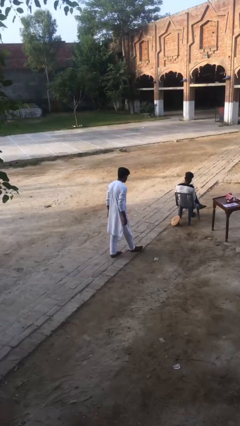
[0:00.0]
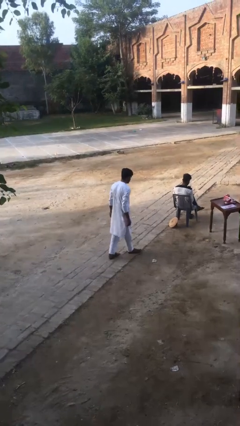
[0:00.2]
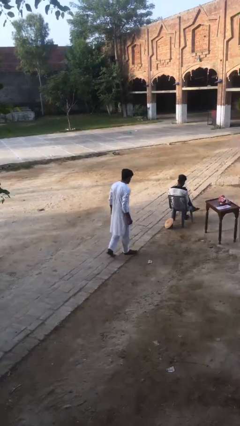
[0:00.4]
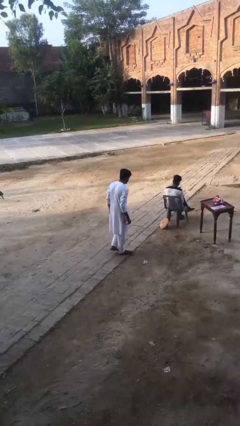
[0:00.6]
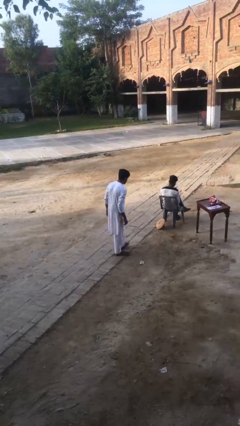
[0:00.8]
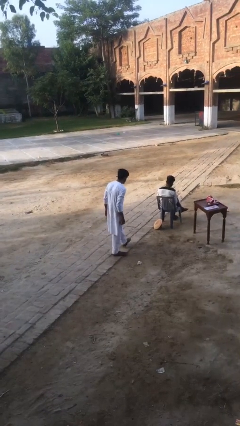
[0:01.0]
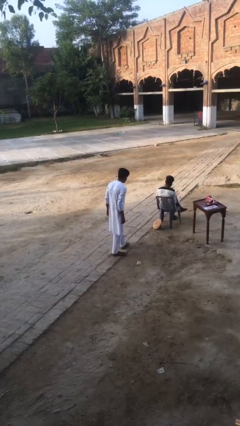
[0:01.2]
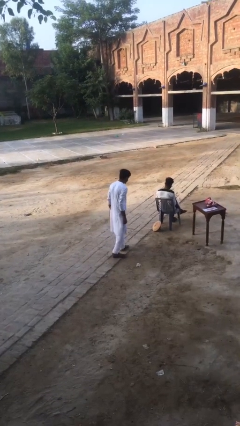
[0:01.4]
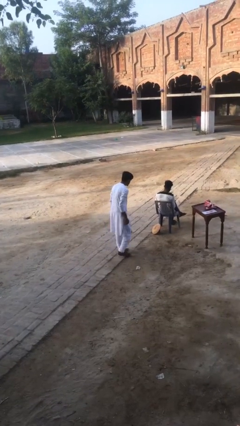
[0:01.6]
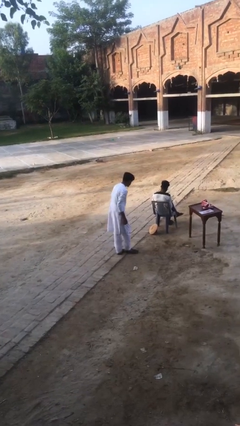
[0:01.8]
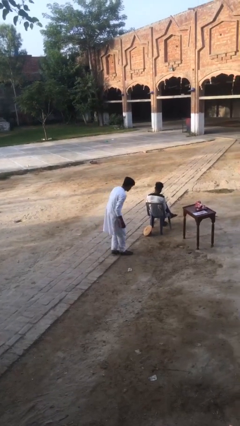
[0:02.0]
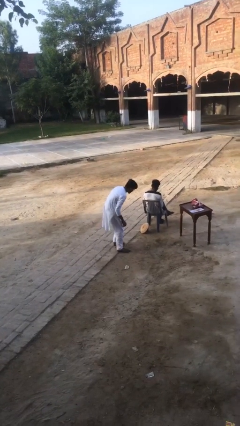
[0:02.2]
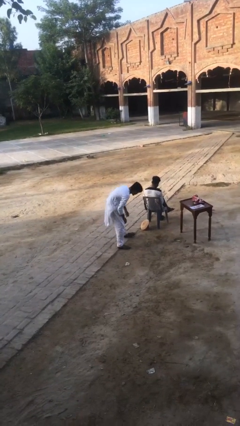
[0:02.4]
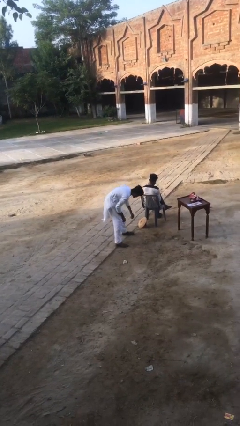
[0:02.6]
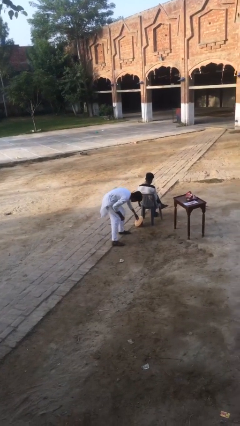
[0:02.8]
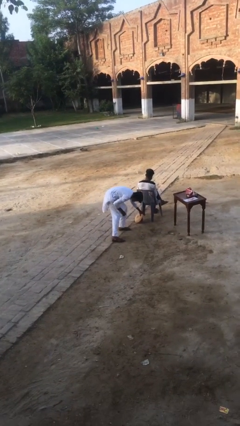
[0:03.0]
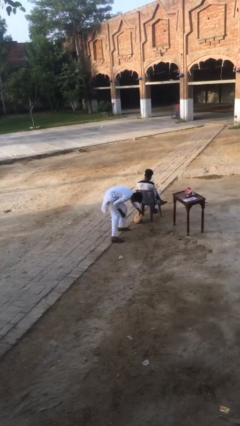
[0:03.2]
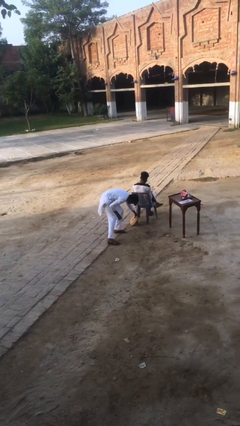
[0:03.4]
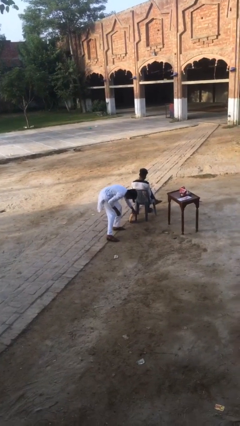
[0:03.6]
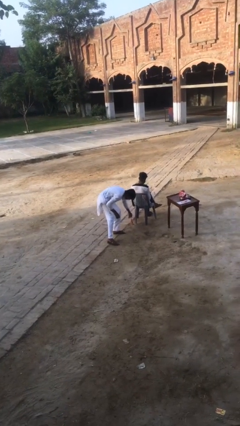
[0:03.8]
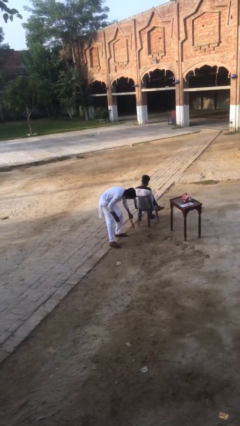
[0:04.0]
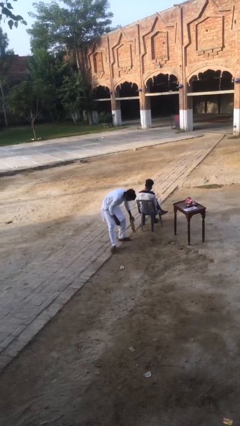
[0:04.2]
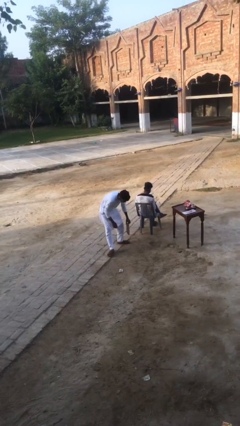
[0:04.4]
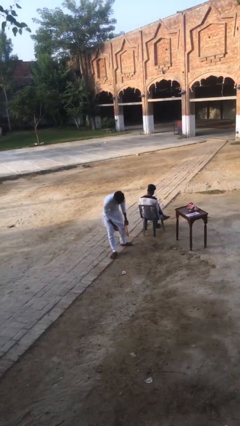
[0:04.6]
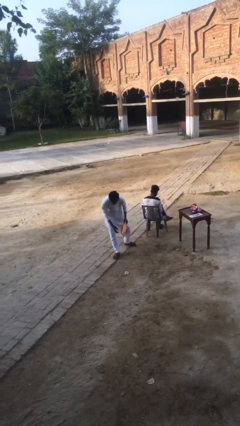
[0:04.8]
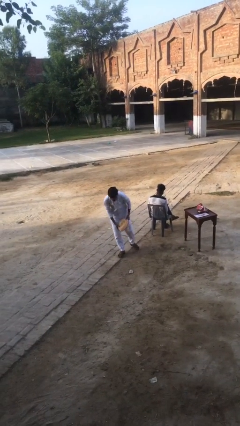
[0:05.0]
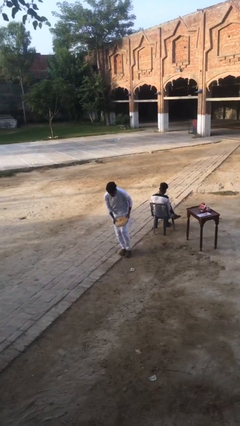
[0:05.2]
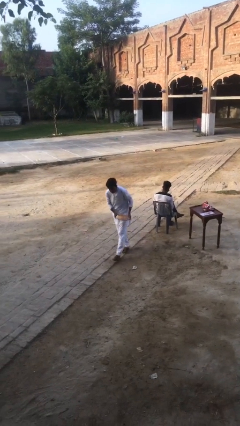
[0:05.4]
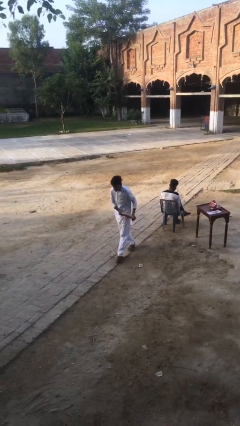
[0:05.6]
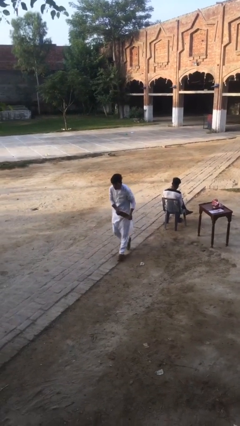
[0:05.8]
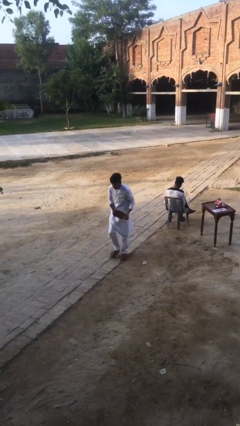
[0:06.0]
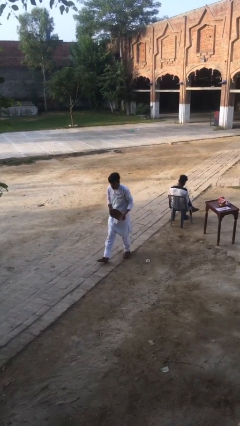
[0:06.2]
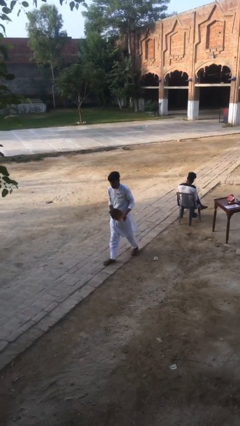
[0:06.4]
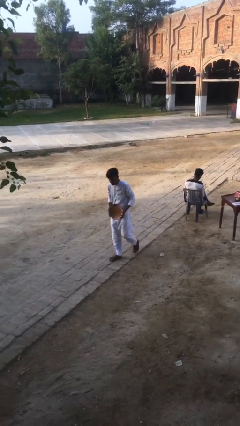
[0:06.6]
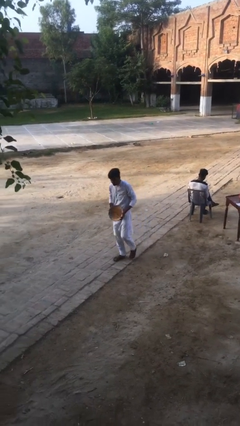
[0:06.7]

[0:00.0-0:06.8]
person steals object from person

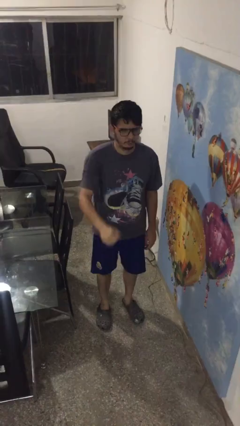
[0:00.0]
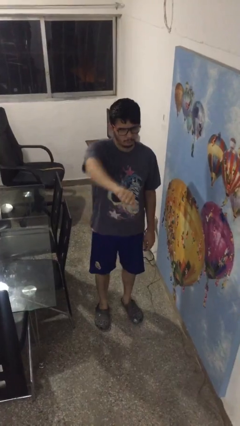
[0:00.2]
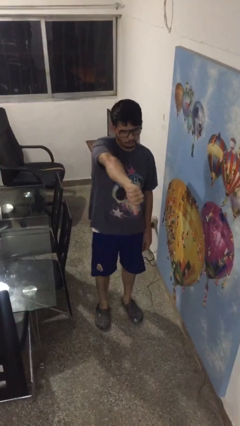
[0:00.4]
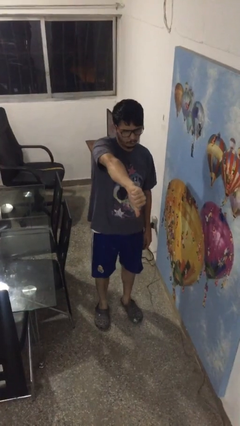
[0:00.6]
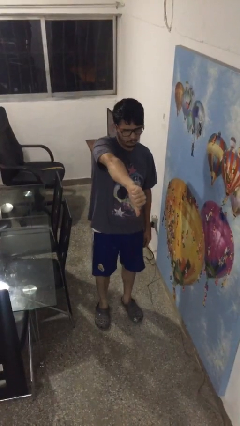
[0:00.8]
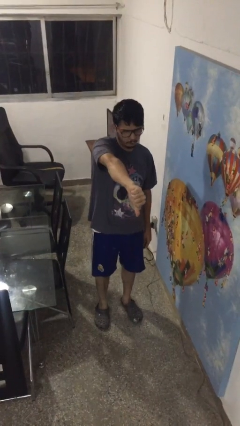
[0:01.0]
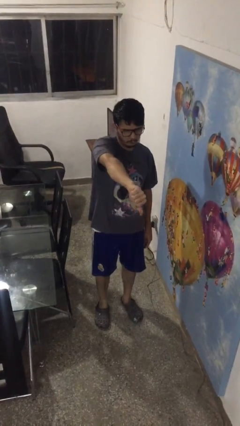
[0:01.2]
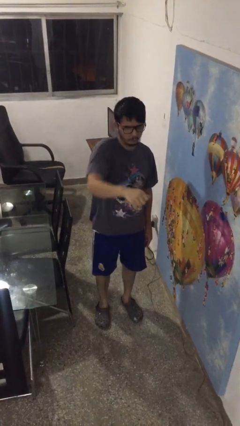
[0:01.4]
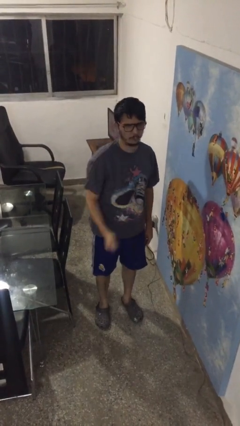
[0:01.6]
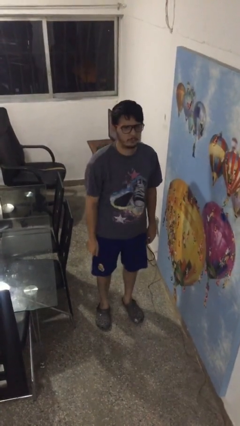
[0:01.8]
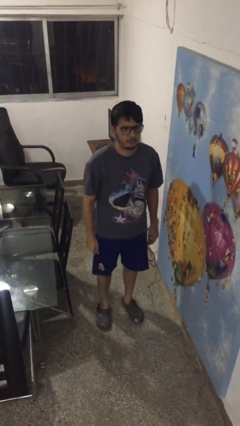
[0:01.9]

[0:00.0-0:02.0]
person gestures thumbs down

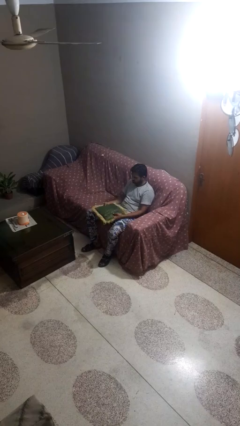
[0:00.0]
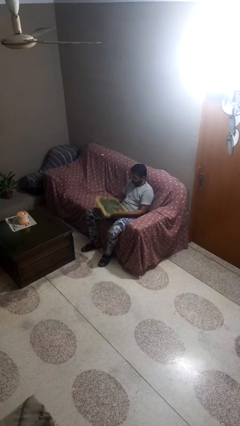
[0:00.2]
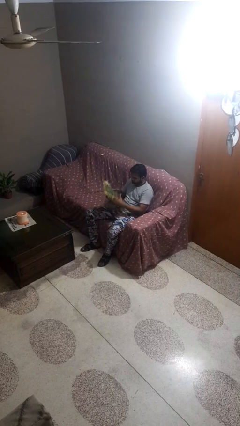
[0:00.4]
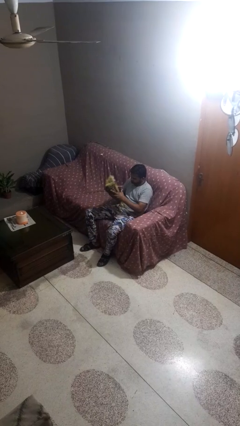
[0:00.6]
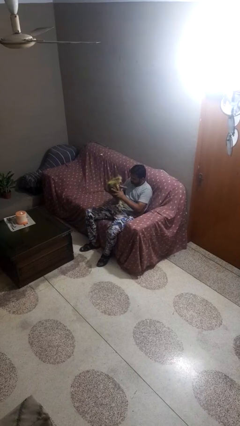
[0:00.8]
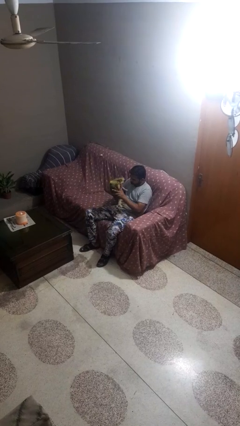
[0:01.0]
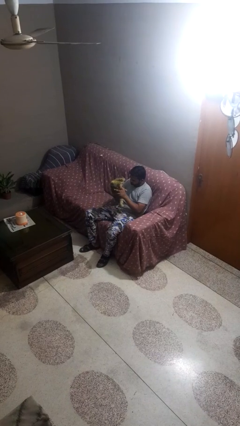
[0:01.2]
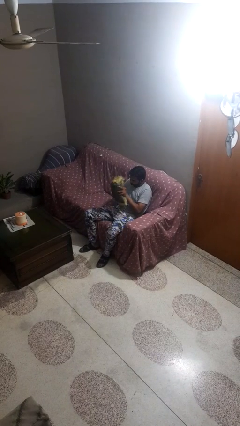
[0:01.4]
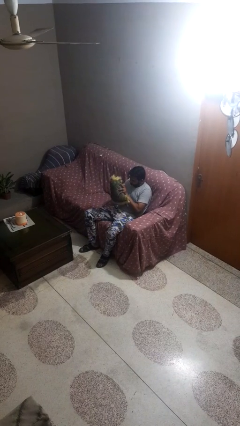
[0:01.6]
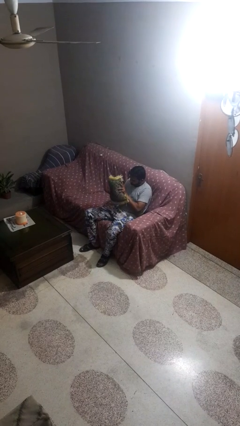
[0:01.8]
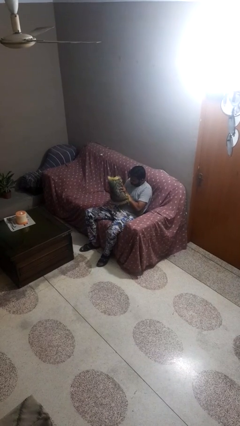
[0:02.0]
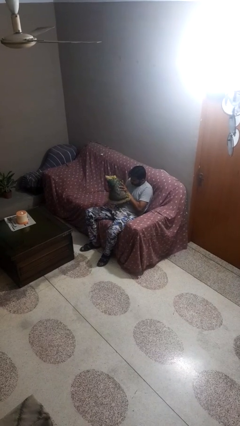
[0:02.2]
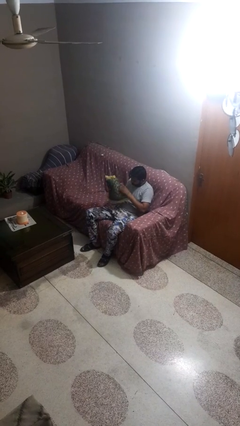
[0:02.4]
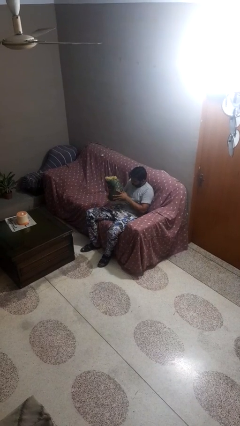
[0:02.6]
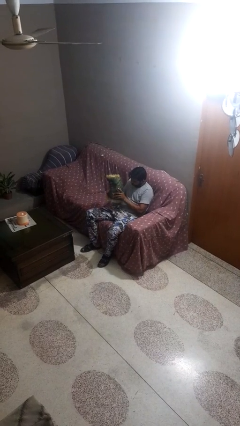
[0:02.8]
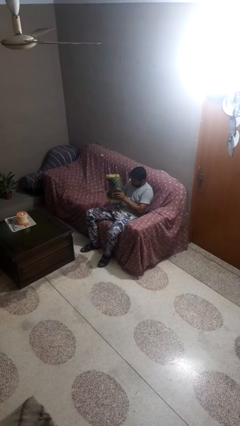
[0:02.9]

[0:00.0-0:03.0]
person squeezes object

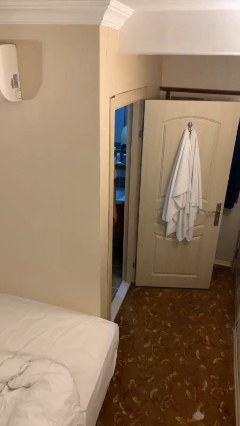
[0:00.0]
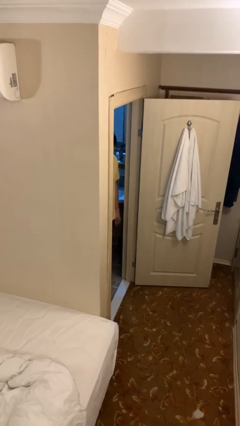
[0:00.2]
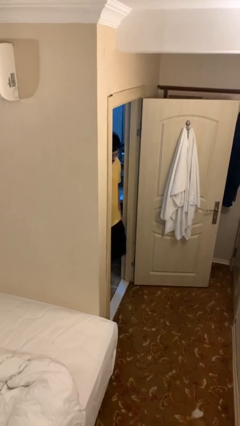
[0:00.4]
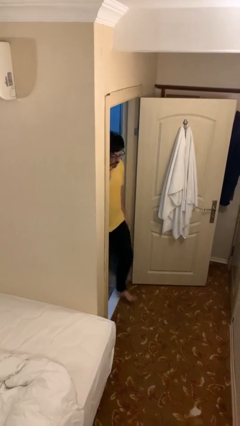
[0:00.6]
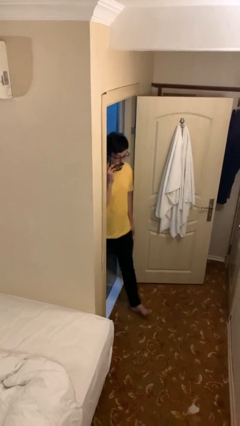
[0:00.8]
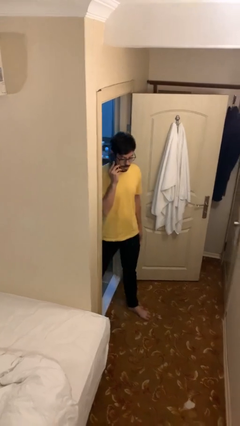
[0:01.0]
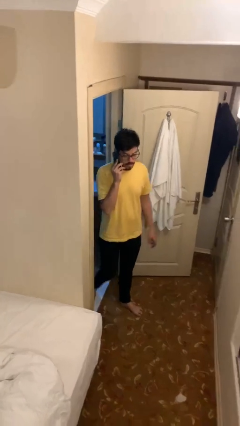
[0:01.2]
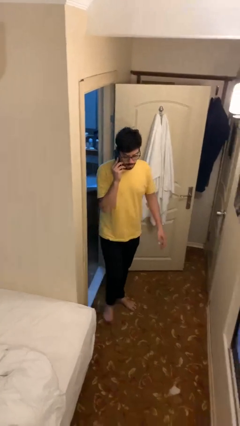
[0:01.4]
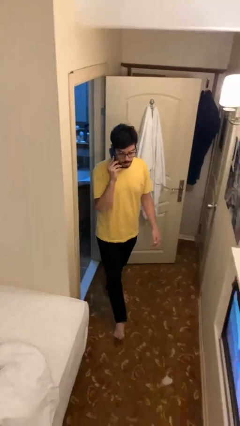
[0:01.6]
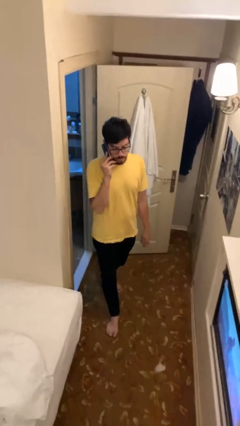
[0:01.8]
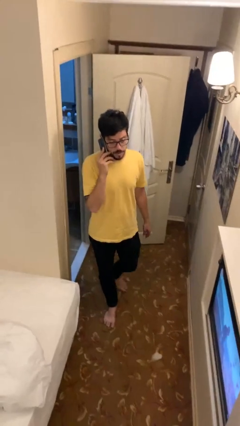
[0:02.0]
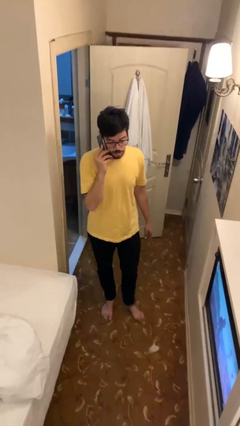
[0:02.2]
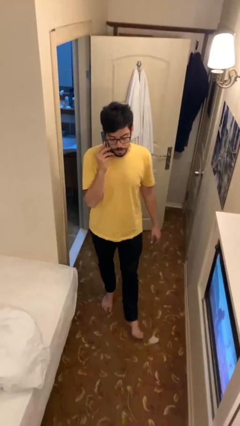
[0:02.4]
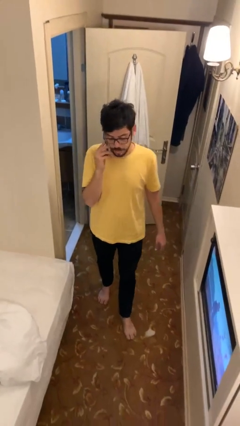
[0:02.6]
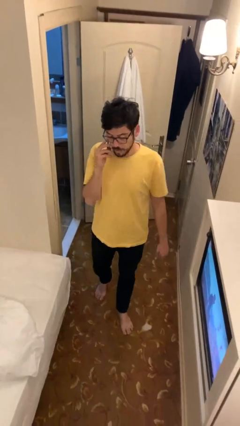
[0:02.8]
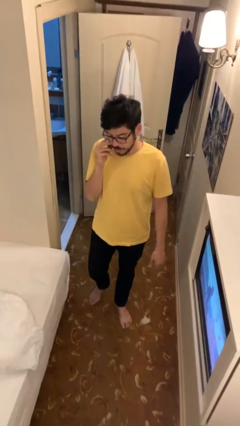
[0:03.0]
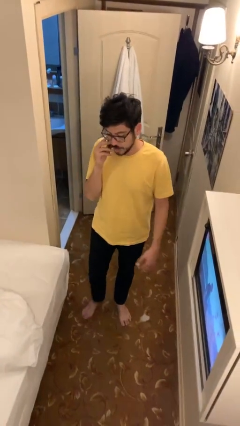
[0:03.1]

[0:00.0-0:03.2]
person enters scene through structure

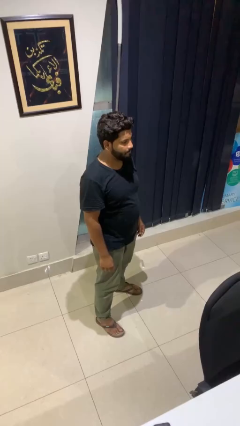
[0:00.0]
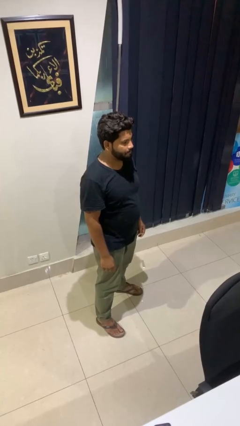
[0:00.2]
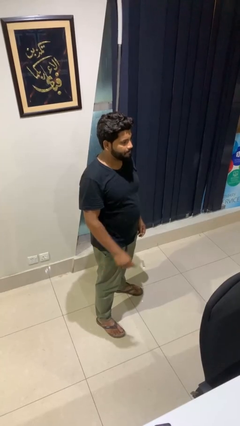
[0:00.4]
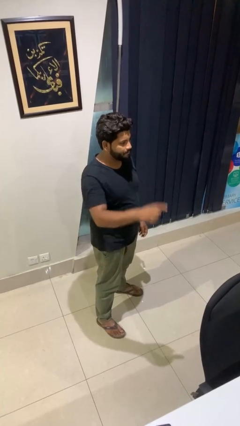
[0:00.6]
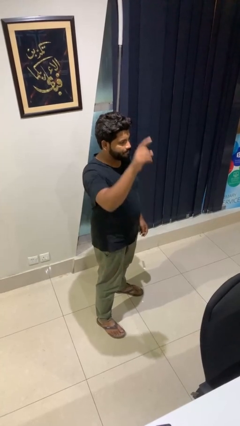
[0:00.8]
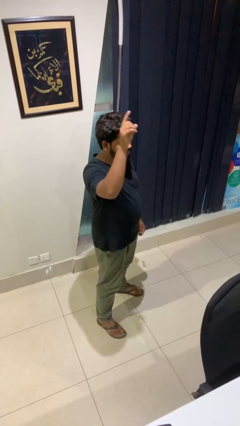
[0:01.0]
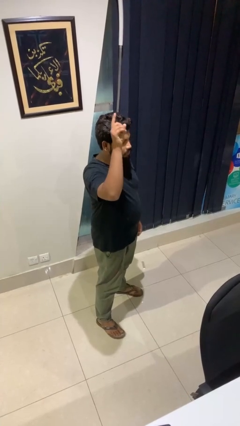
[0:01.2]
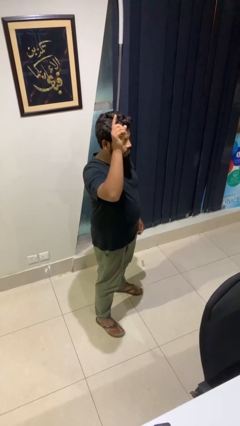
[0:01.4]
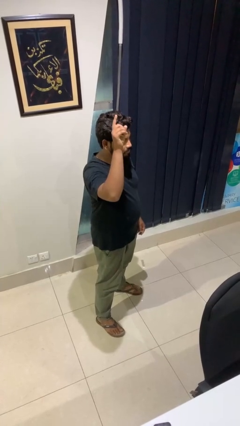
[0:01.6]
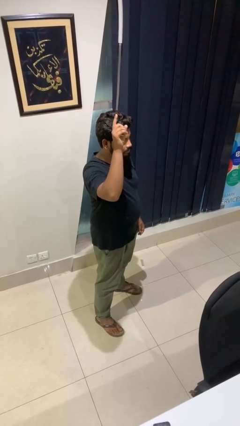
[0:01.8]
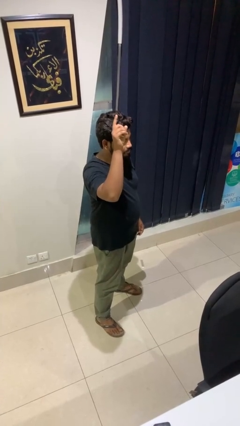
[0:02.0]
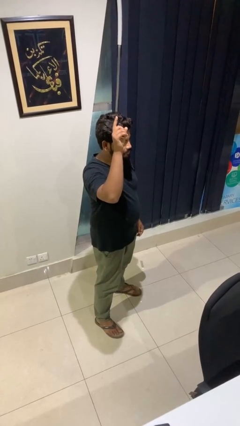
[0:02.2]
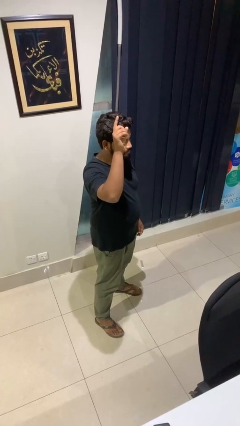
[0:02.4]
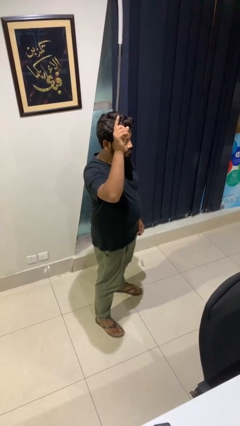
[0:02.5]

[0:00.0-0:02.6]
person gestures raise hand

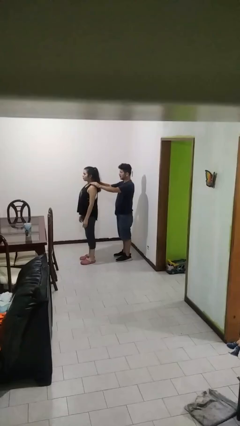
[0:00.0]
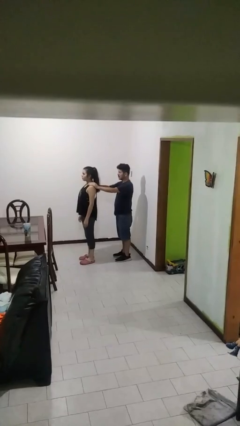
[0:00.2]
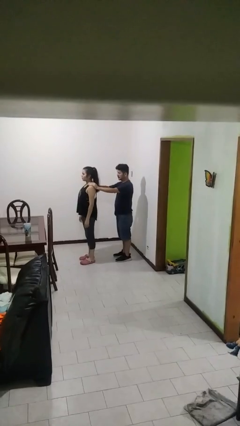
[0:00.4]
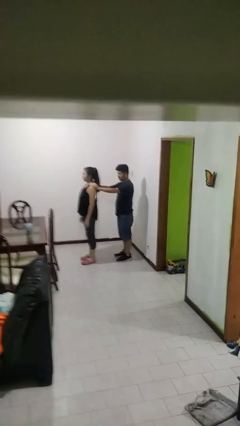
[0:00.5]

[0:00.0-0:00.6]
person grabs person by shoulder
